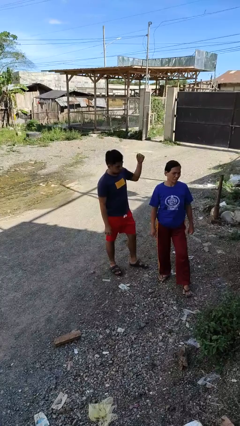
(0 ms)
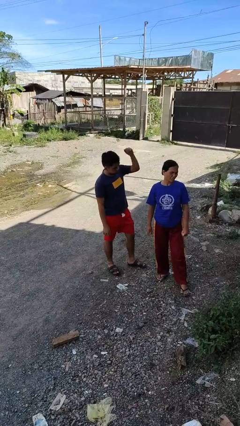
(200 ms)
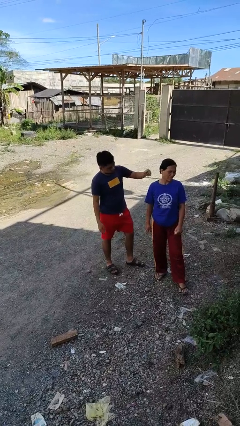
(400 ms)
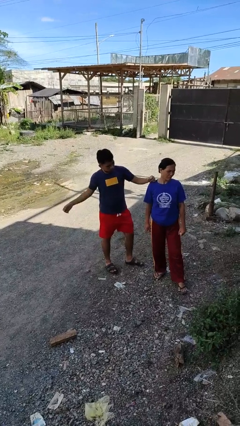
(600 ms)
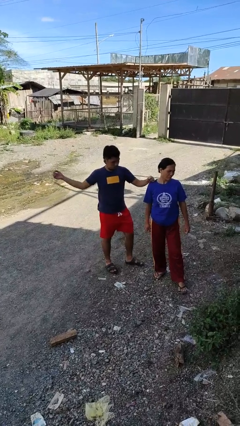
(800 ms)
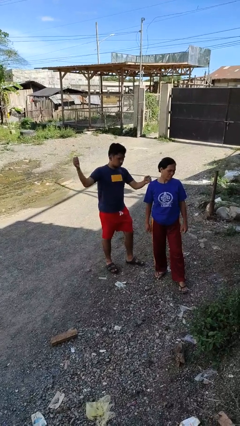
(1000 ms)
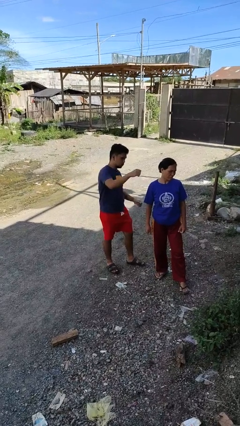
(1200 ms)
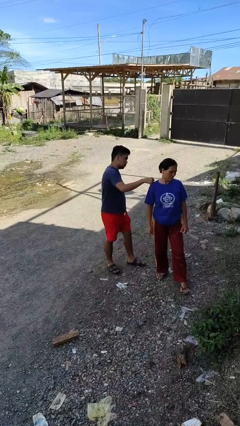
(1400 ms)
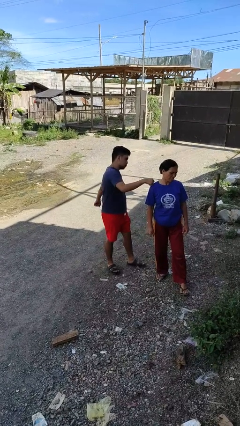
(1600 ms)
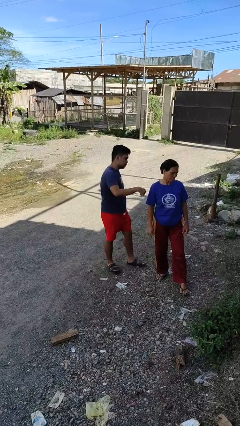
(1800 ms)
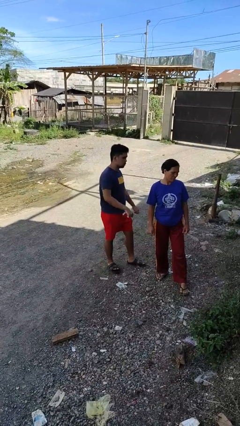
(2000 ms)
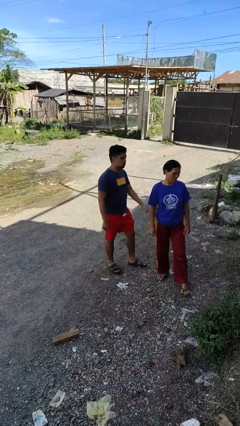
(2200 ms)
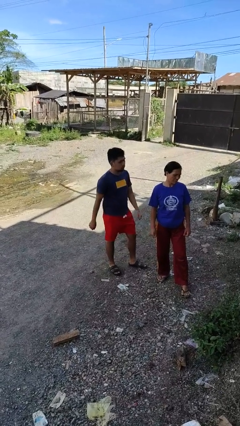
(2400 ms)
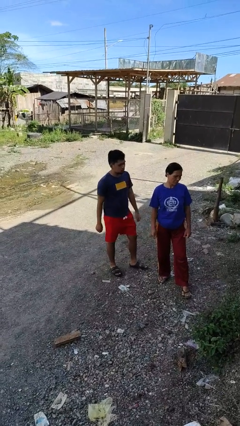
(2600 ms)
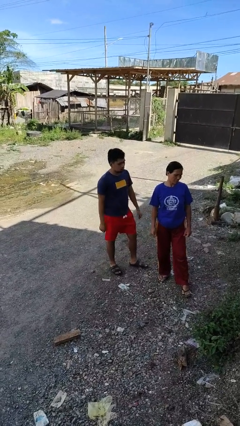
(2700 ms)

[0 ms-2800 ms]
person pounds shoulders of person

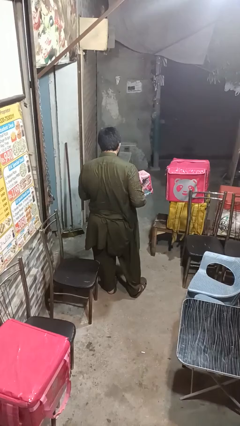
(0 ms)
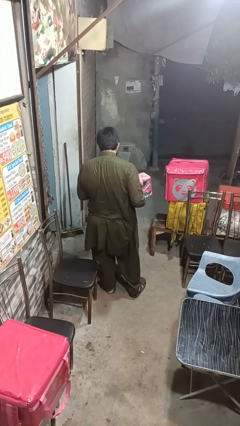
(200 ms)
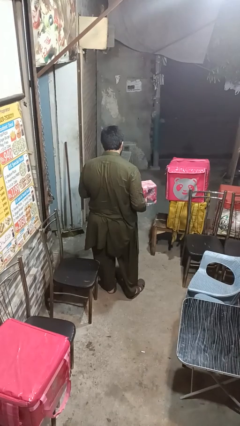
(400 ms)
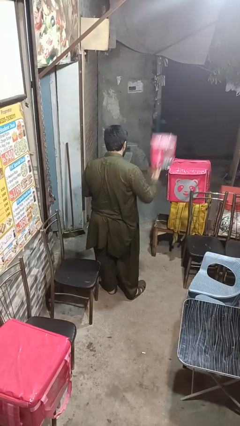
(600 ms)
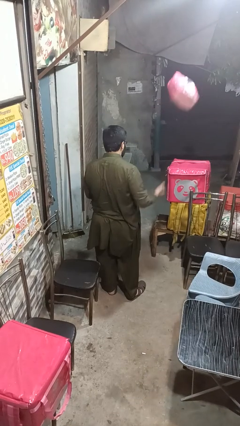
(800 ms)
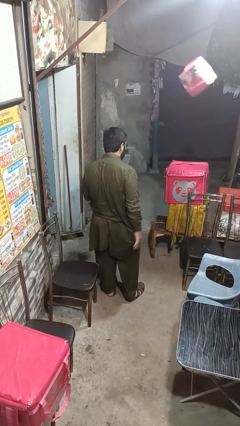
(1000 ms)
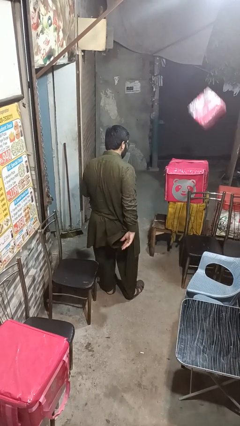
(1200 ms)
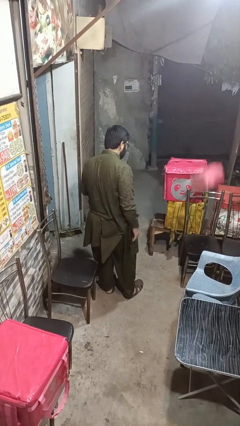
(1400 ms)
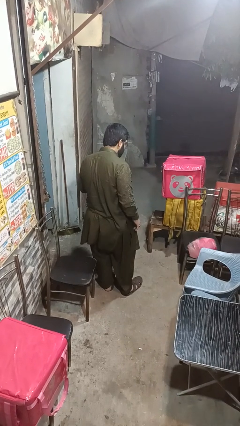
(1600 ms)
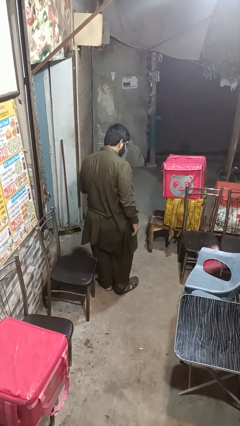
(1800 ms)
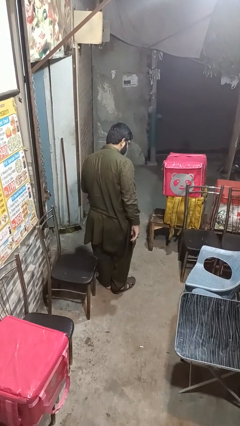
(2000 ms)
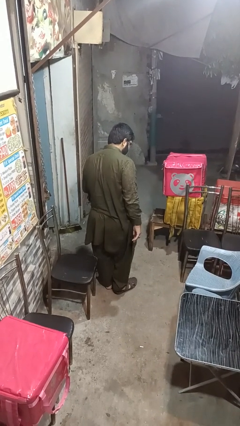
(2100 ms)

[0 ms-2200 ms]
person throws object into air

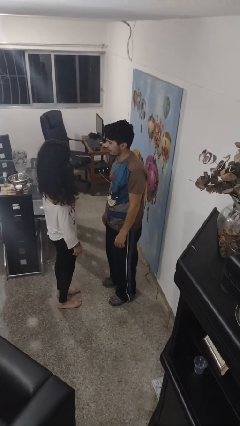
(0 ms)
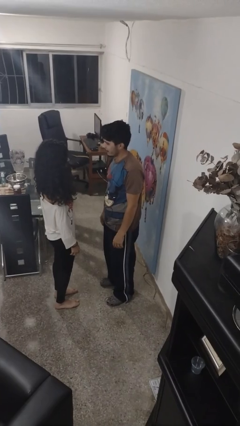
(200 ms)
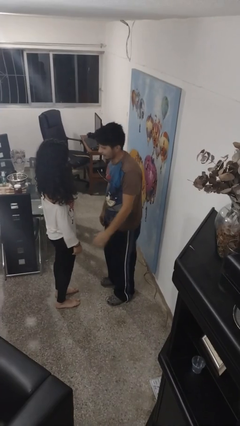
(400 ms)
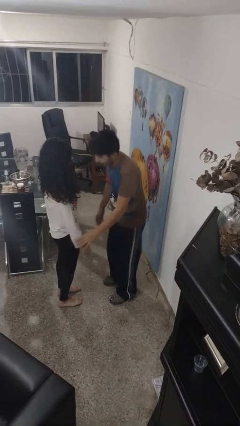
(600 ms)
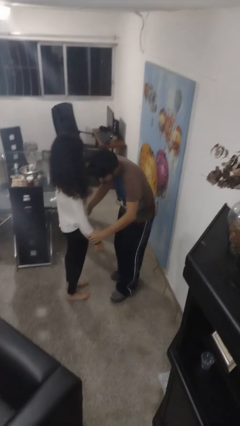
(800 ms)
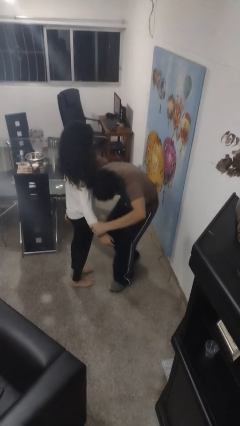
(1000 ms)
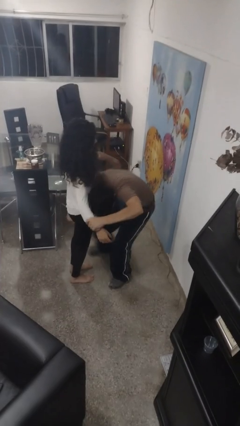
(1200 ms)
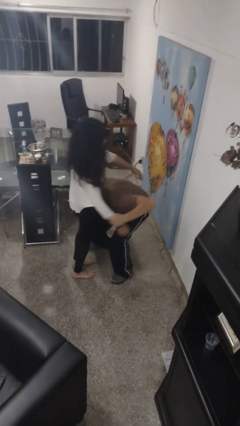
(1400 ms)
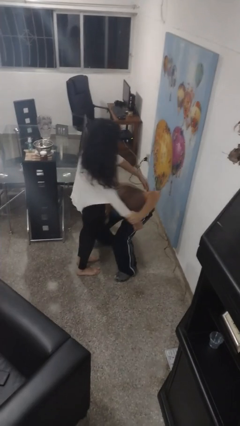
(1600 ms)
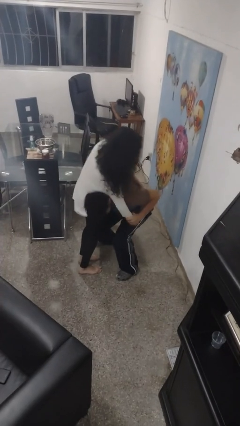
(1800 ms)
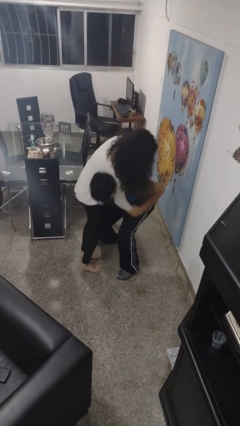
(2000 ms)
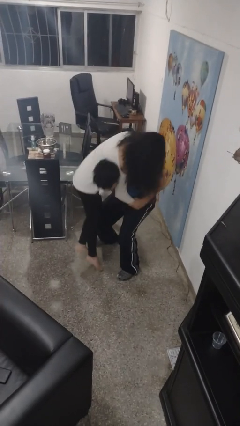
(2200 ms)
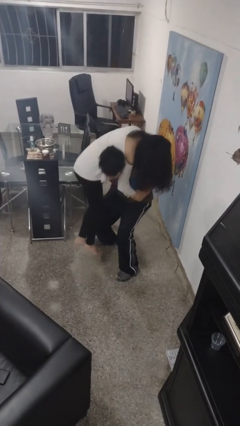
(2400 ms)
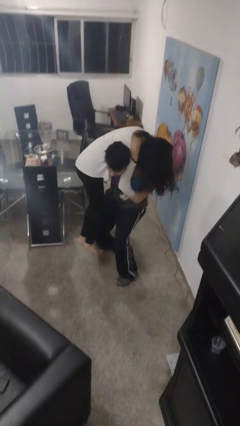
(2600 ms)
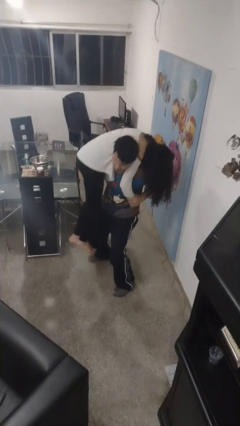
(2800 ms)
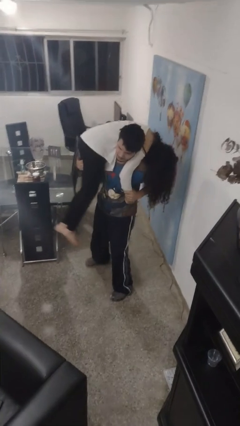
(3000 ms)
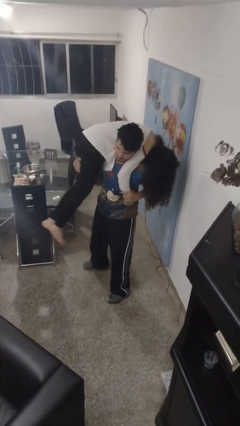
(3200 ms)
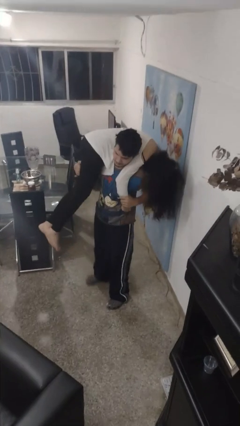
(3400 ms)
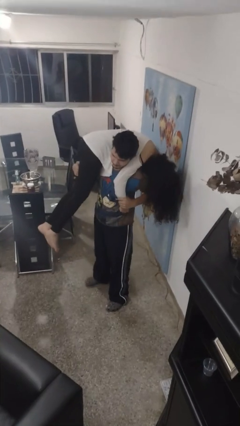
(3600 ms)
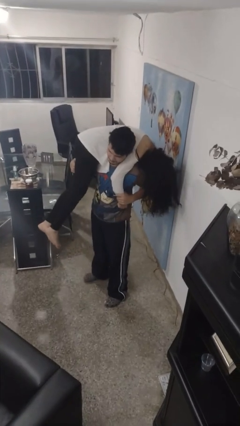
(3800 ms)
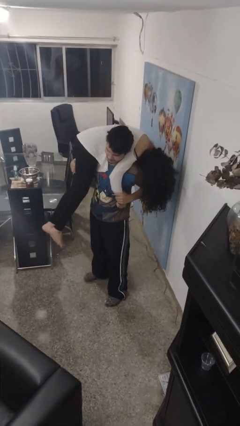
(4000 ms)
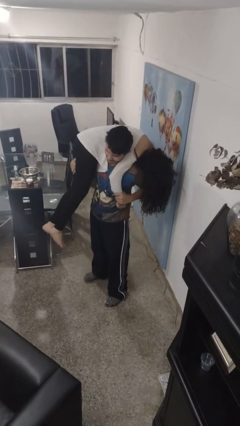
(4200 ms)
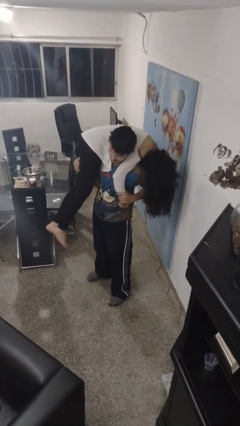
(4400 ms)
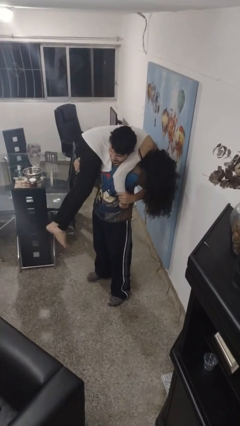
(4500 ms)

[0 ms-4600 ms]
person carries person over shoulder

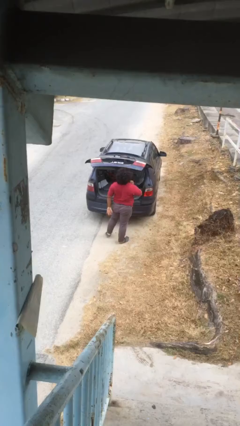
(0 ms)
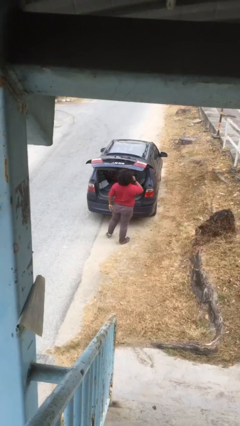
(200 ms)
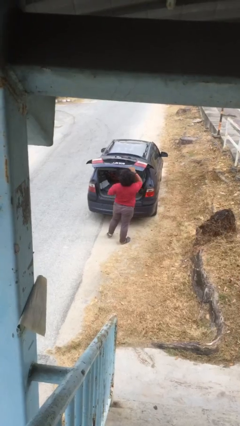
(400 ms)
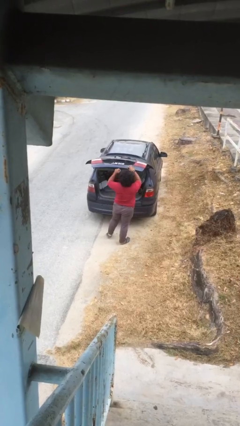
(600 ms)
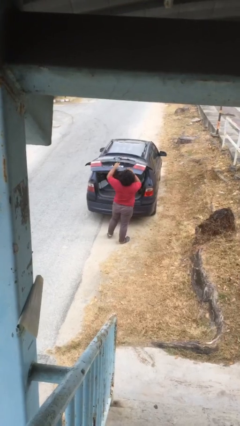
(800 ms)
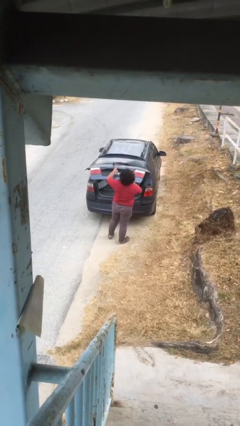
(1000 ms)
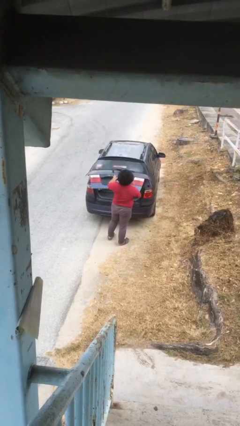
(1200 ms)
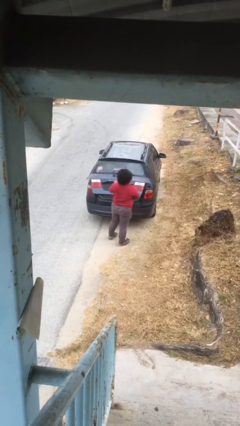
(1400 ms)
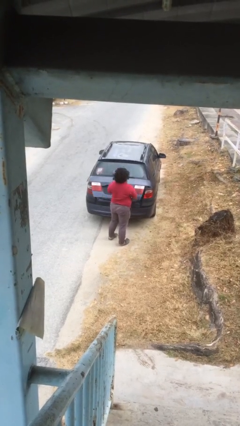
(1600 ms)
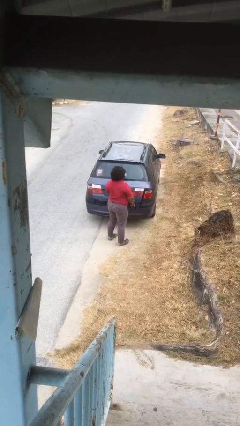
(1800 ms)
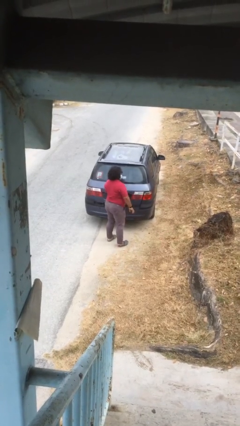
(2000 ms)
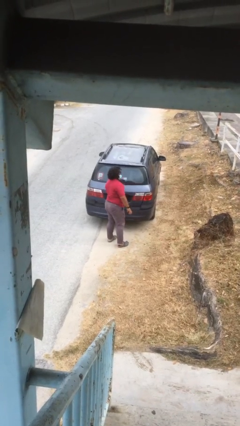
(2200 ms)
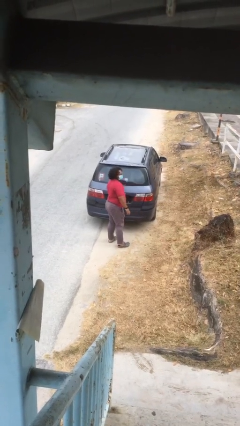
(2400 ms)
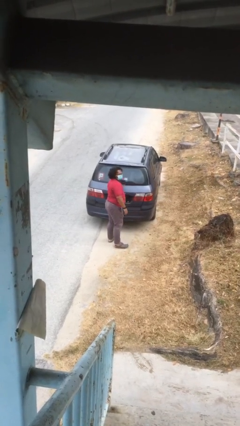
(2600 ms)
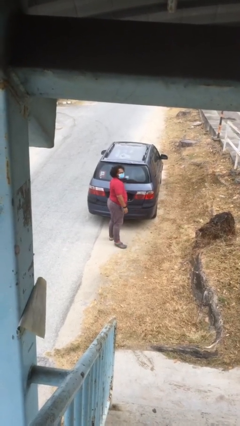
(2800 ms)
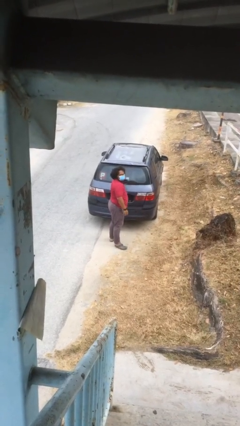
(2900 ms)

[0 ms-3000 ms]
person closes car trunk

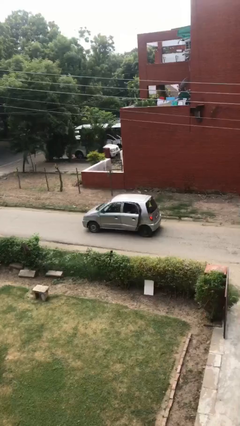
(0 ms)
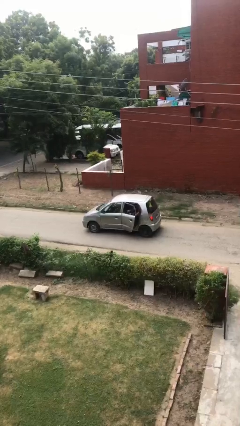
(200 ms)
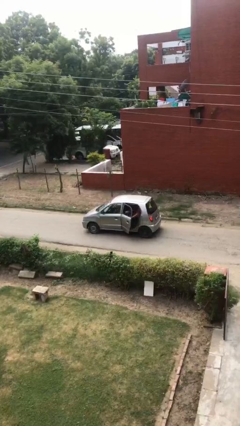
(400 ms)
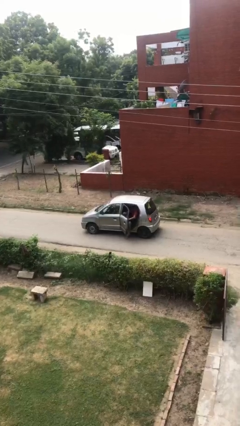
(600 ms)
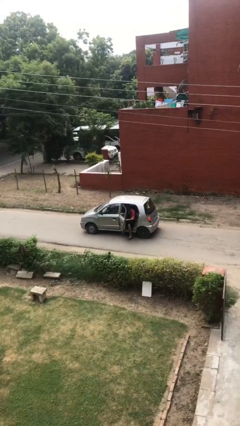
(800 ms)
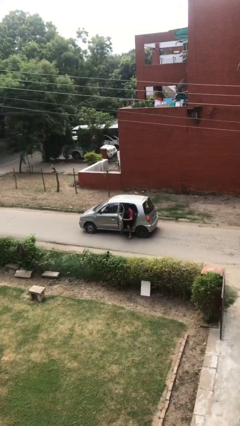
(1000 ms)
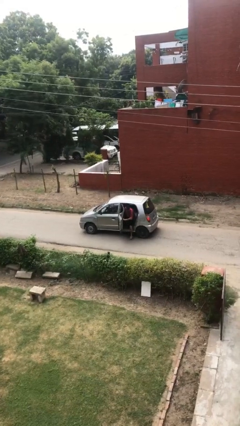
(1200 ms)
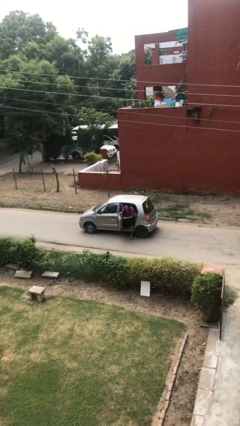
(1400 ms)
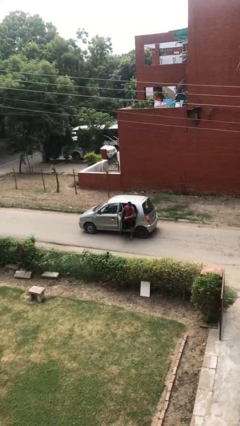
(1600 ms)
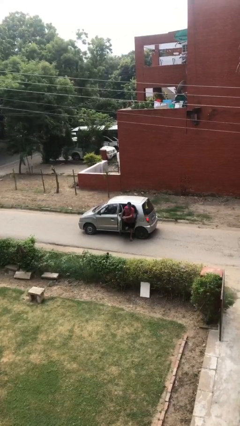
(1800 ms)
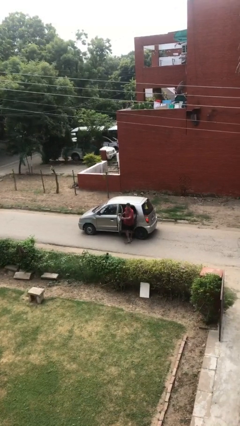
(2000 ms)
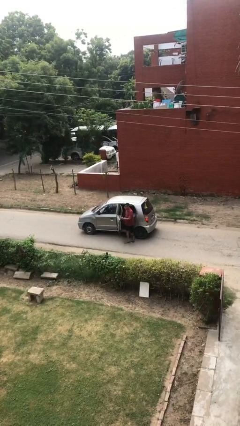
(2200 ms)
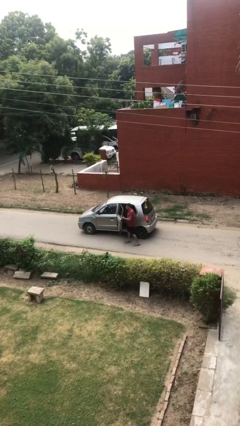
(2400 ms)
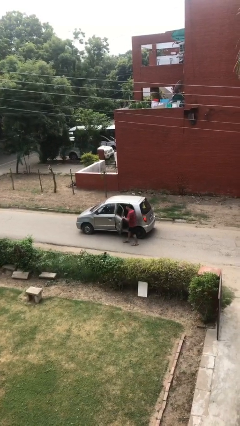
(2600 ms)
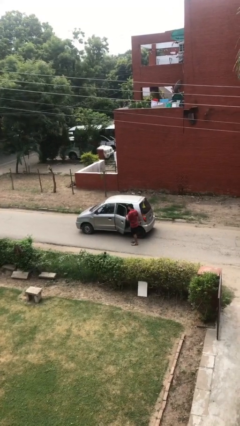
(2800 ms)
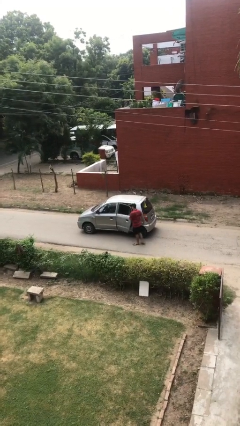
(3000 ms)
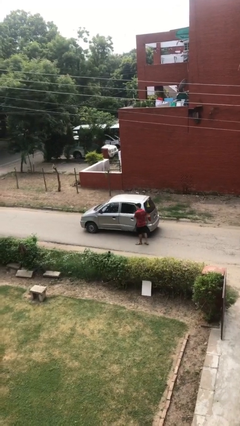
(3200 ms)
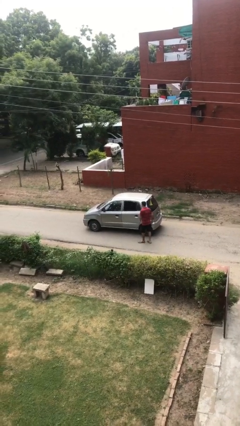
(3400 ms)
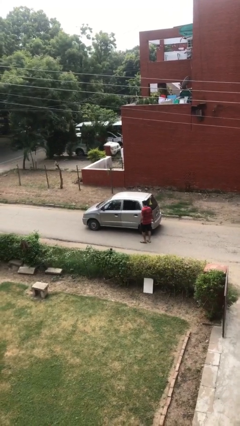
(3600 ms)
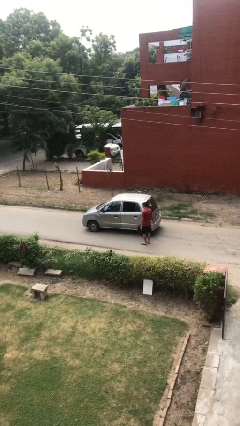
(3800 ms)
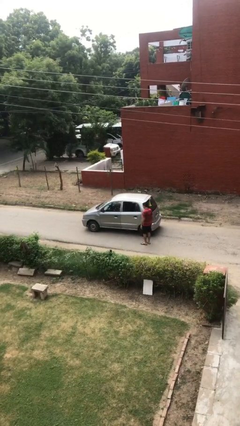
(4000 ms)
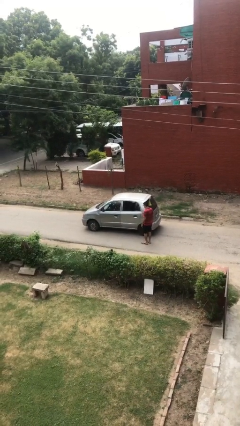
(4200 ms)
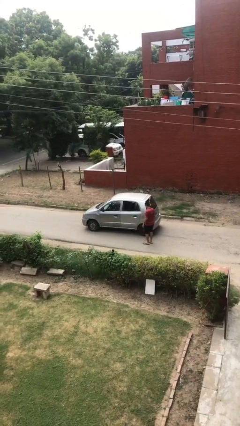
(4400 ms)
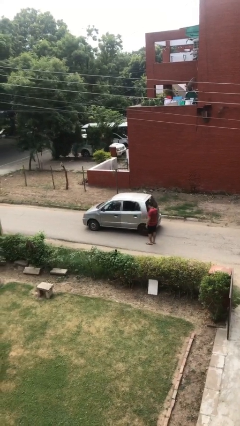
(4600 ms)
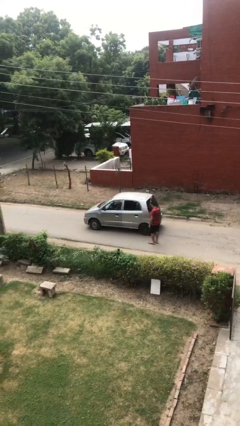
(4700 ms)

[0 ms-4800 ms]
car drops off person
